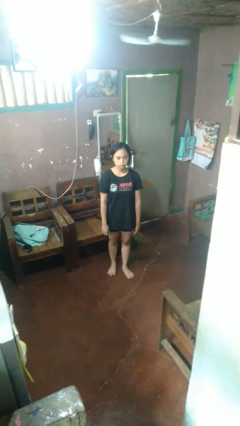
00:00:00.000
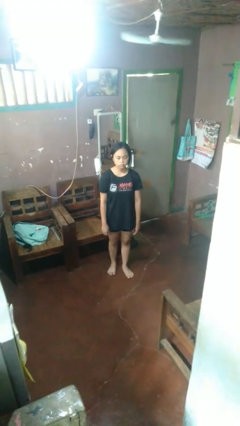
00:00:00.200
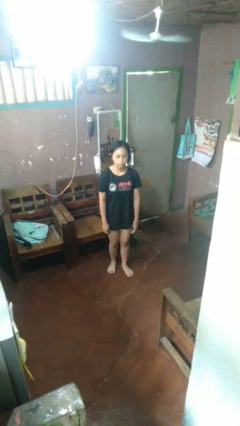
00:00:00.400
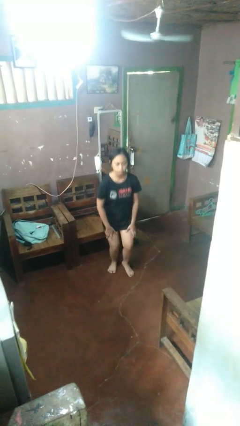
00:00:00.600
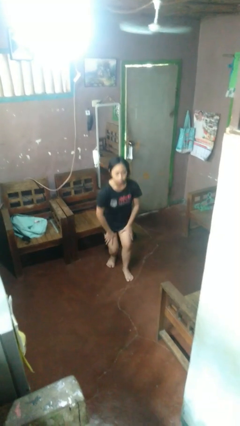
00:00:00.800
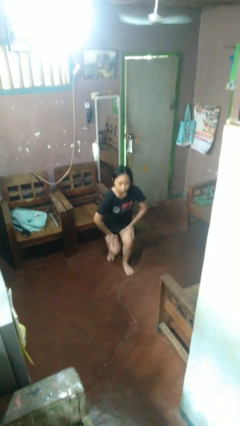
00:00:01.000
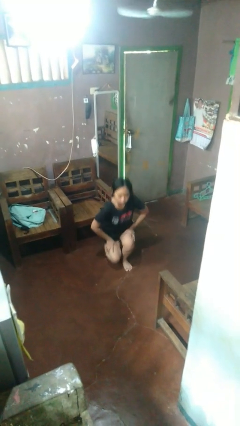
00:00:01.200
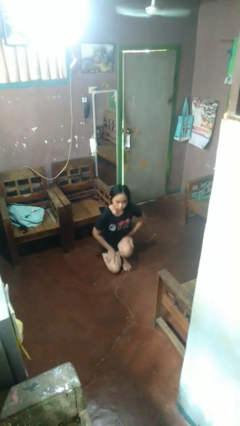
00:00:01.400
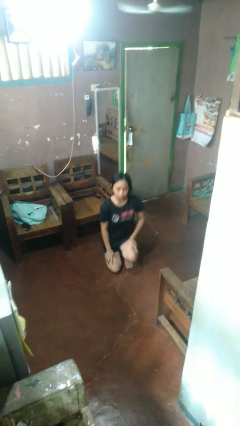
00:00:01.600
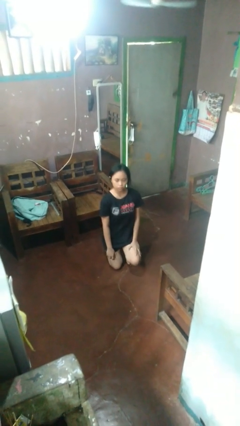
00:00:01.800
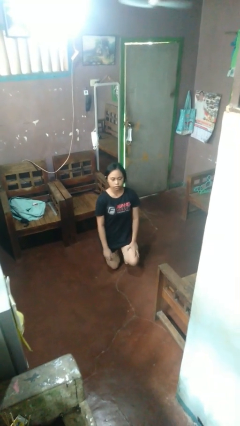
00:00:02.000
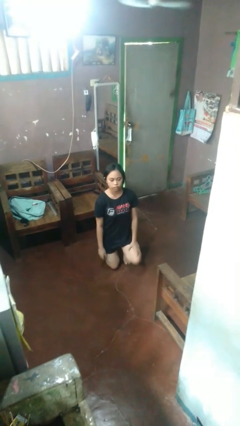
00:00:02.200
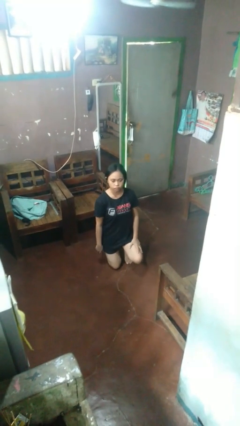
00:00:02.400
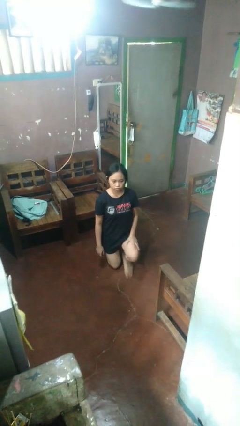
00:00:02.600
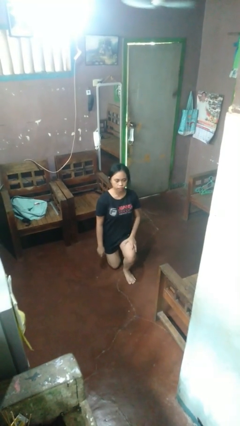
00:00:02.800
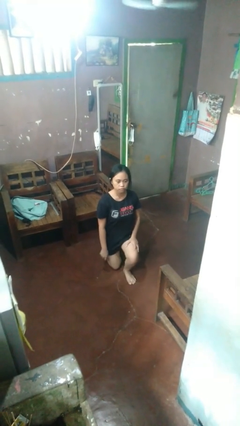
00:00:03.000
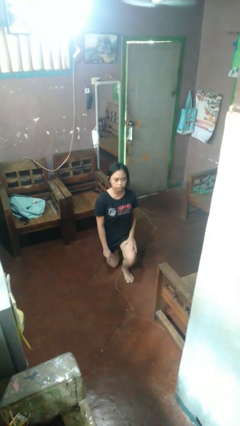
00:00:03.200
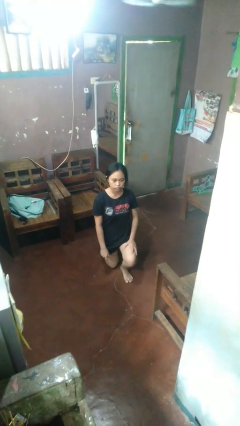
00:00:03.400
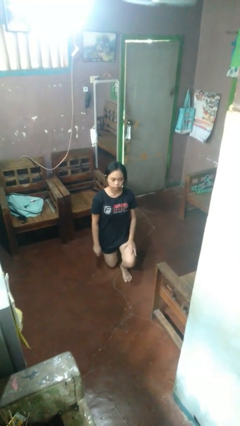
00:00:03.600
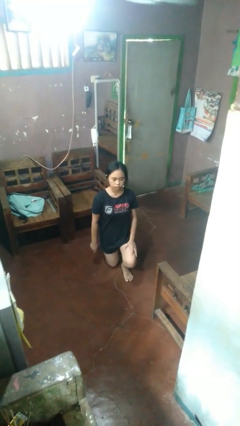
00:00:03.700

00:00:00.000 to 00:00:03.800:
person kneels

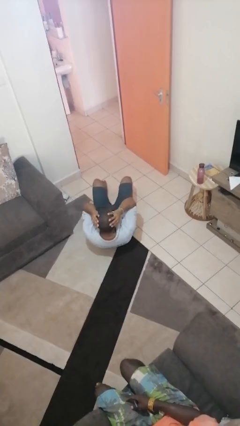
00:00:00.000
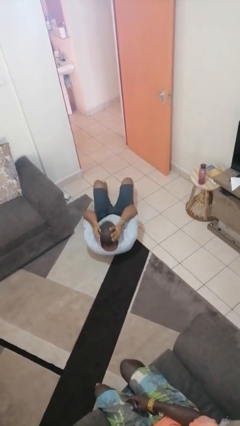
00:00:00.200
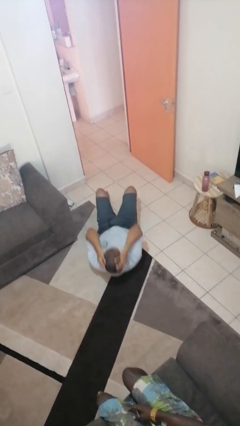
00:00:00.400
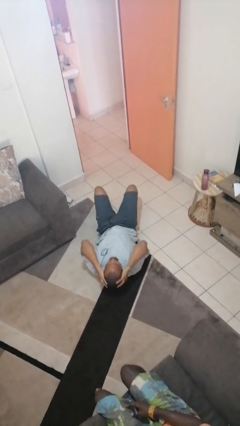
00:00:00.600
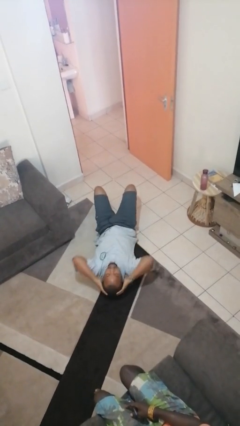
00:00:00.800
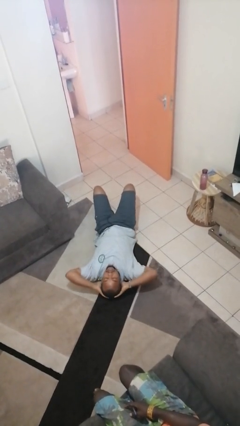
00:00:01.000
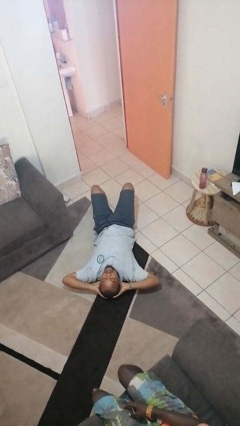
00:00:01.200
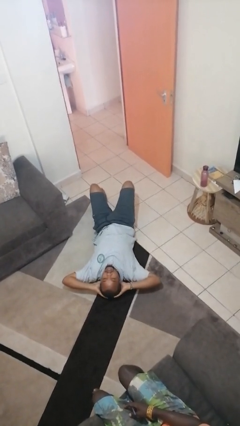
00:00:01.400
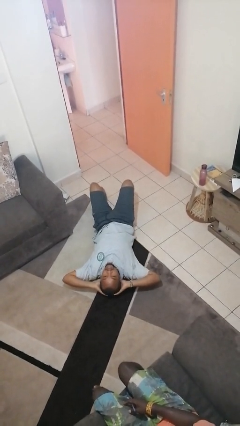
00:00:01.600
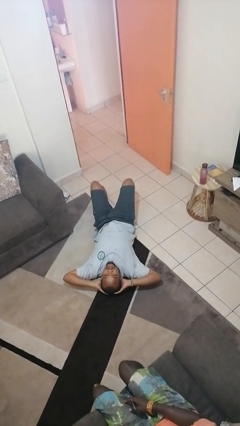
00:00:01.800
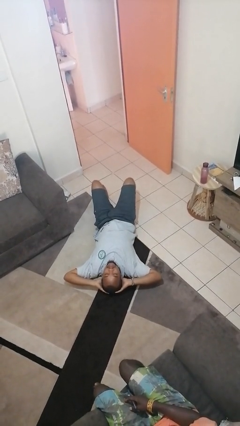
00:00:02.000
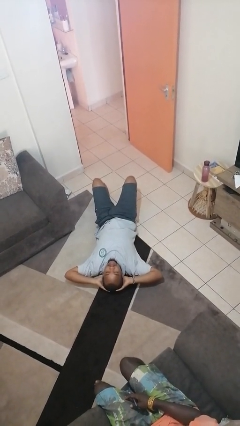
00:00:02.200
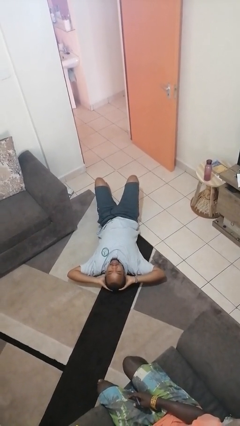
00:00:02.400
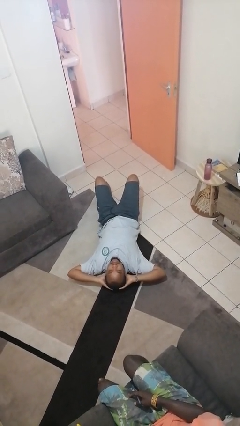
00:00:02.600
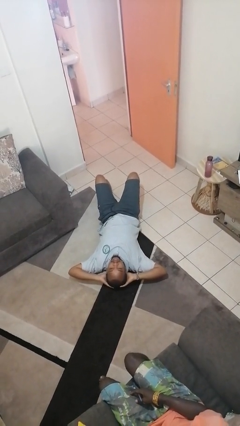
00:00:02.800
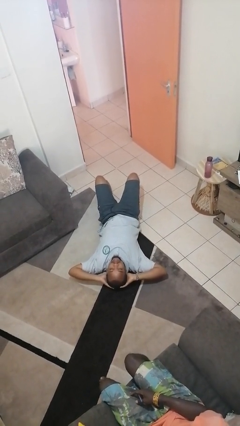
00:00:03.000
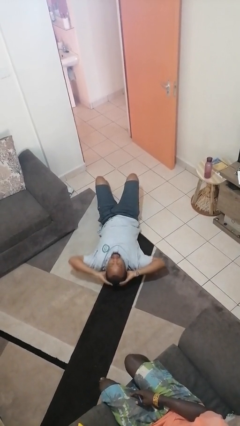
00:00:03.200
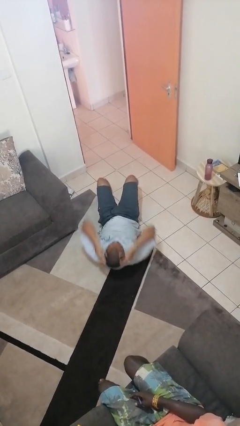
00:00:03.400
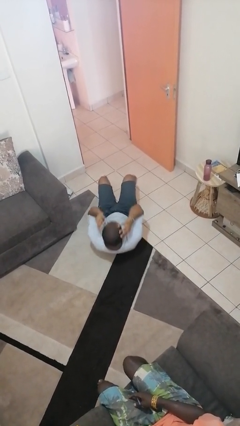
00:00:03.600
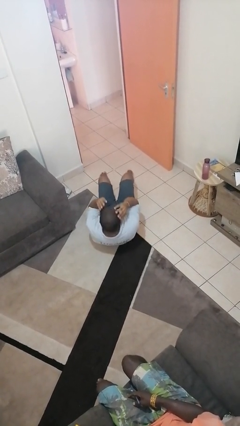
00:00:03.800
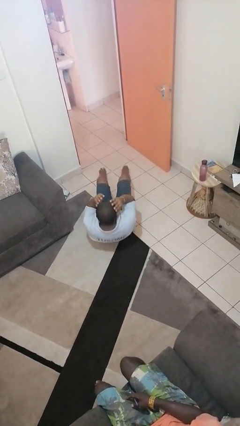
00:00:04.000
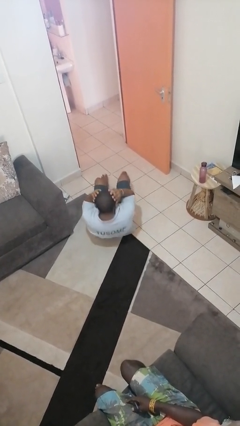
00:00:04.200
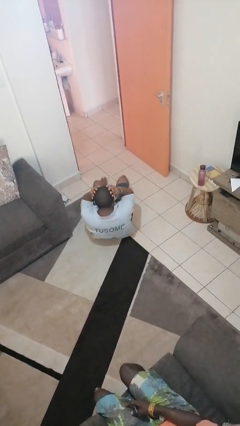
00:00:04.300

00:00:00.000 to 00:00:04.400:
person exercises with lunges

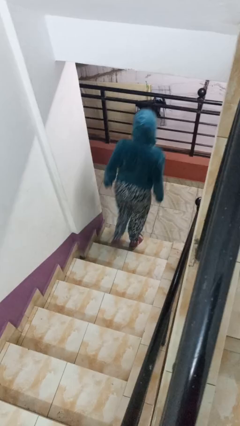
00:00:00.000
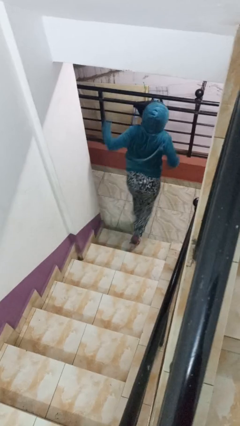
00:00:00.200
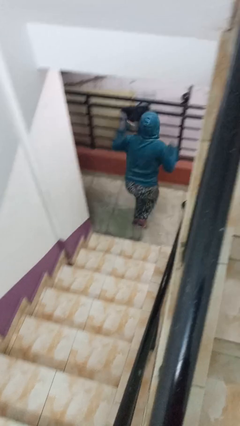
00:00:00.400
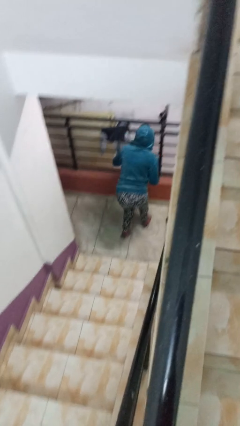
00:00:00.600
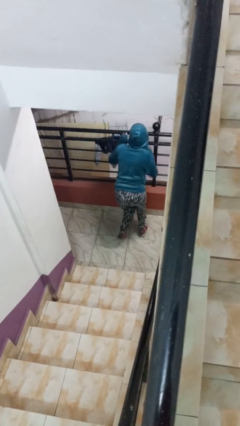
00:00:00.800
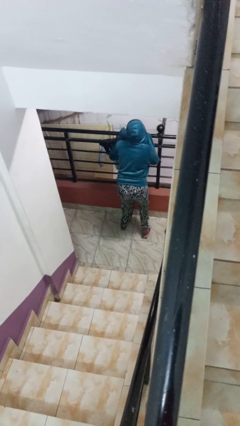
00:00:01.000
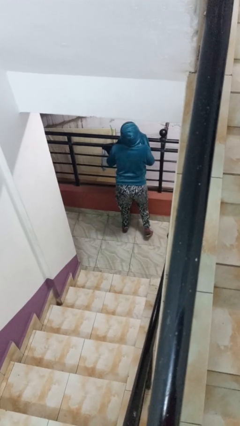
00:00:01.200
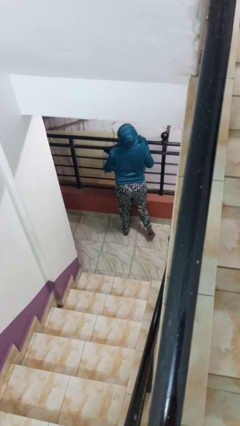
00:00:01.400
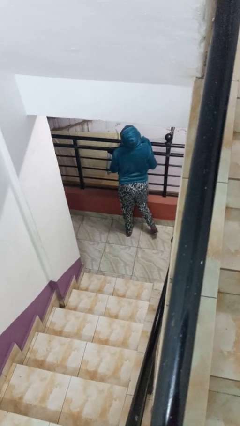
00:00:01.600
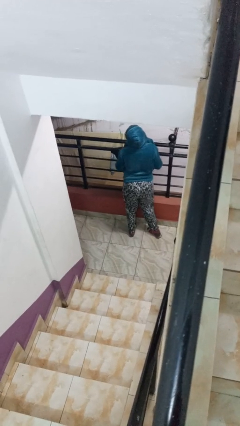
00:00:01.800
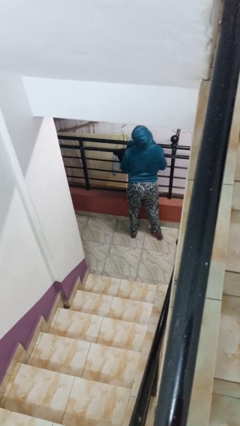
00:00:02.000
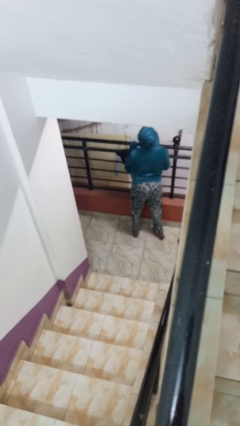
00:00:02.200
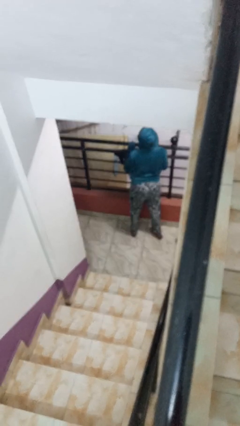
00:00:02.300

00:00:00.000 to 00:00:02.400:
person trips on stair

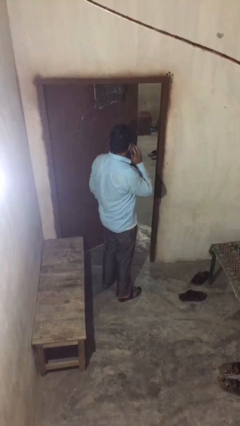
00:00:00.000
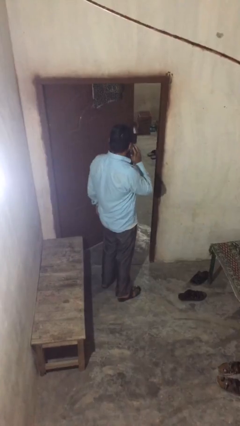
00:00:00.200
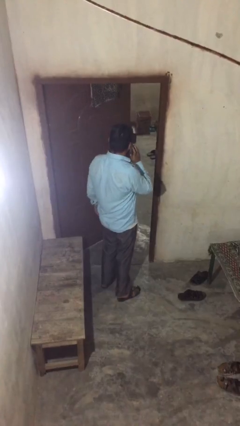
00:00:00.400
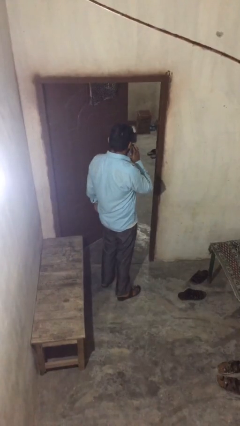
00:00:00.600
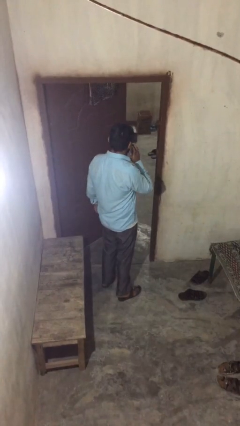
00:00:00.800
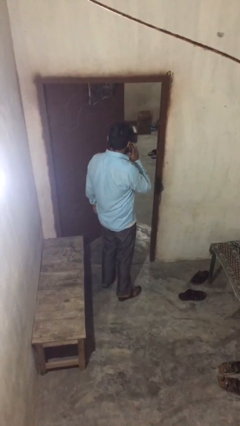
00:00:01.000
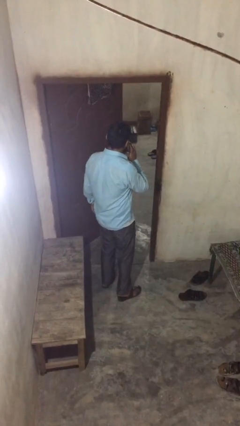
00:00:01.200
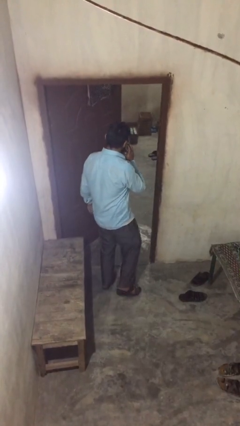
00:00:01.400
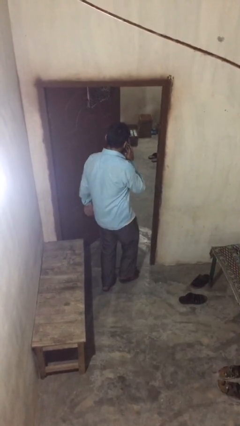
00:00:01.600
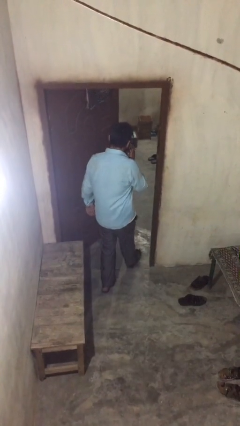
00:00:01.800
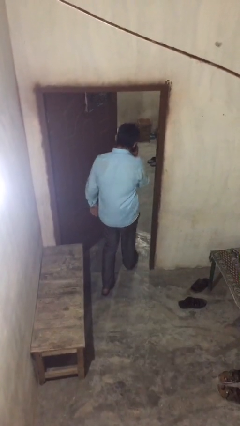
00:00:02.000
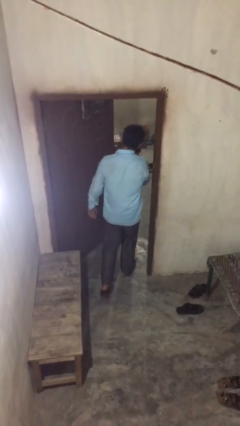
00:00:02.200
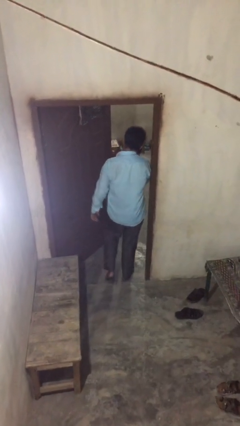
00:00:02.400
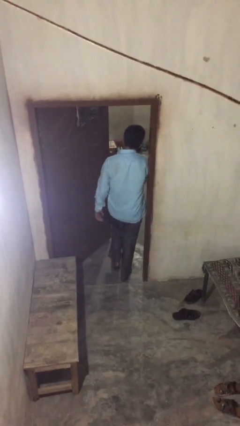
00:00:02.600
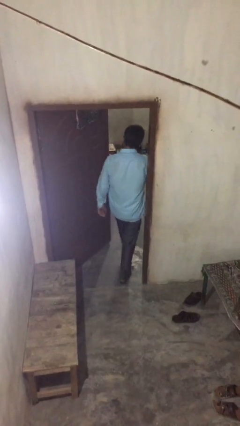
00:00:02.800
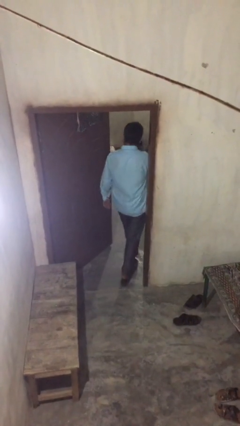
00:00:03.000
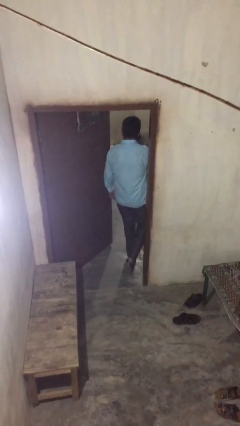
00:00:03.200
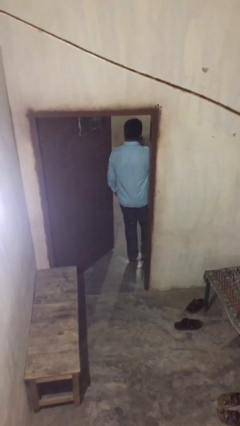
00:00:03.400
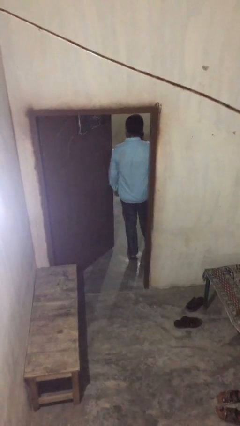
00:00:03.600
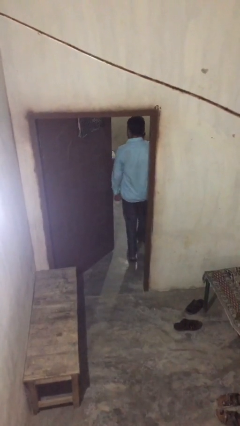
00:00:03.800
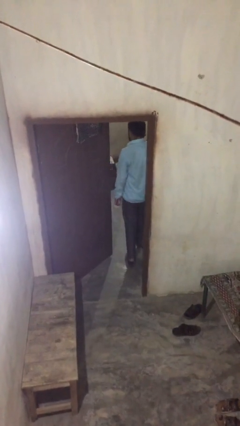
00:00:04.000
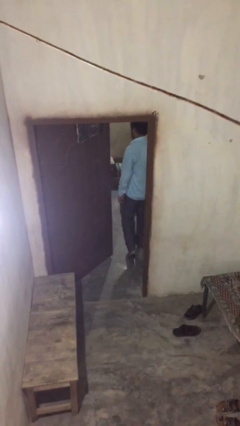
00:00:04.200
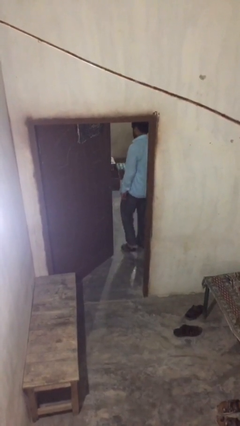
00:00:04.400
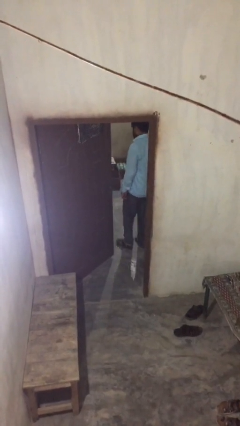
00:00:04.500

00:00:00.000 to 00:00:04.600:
person exits scene through structure

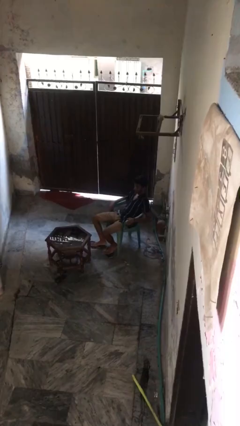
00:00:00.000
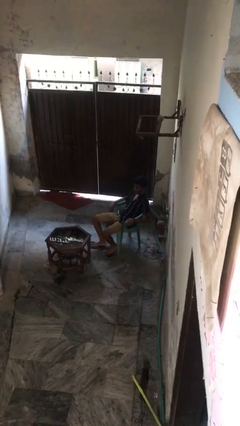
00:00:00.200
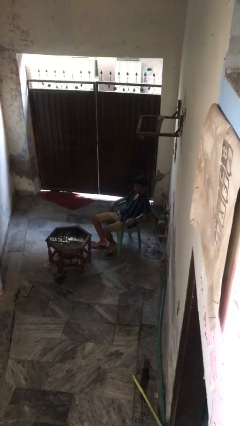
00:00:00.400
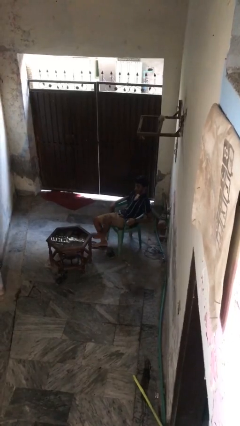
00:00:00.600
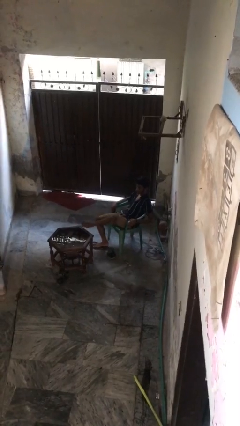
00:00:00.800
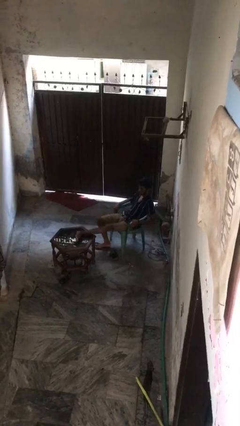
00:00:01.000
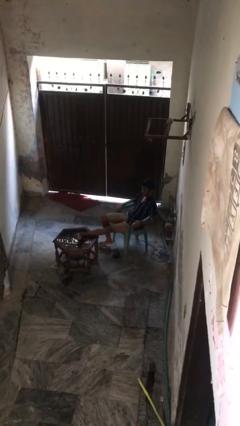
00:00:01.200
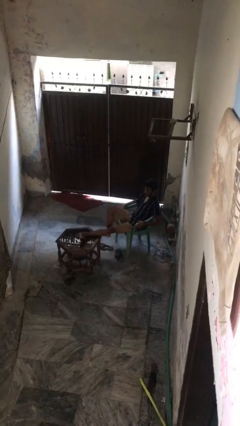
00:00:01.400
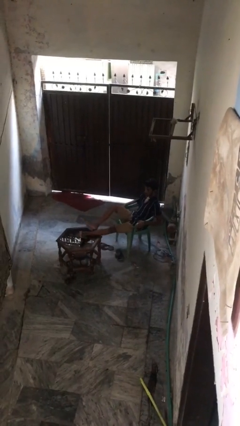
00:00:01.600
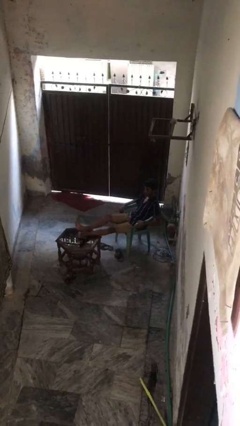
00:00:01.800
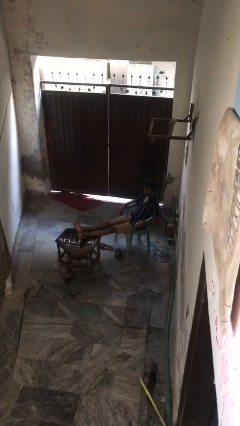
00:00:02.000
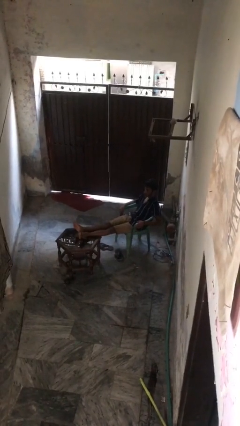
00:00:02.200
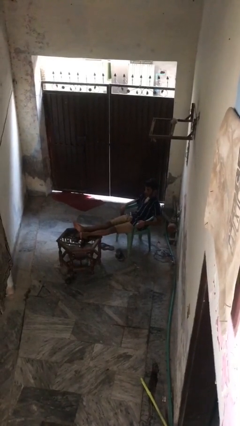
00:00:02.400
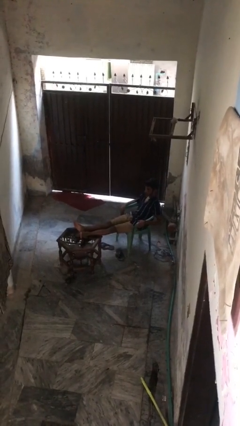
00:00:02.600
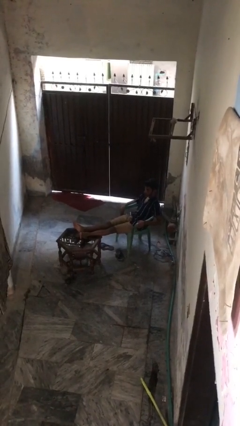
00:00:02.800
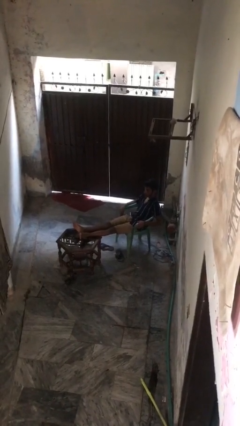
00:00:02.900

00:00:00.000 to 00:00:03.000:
person puts feet up
